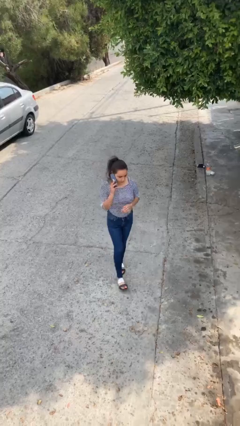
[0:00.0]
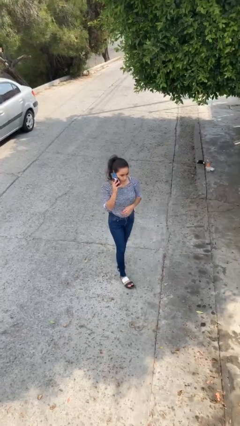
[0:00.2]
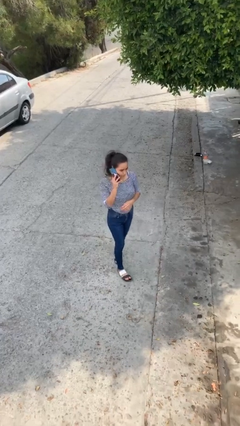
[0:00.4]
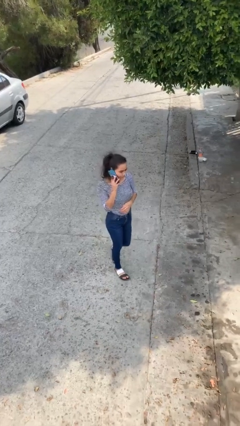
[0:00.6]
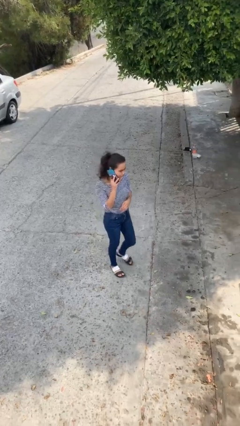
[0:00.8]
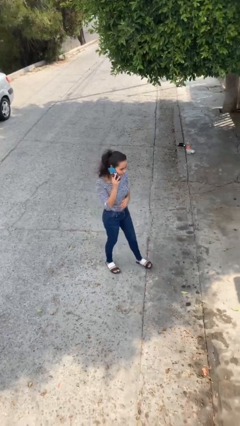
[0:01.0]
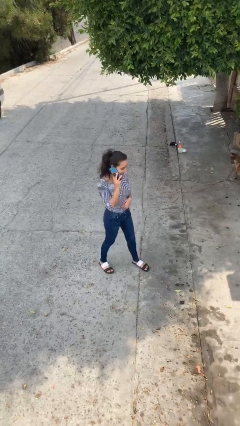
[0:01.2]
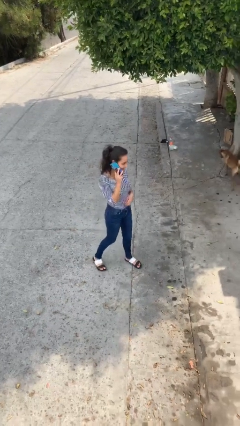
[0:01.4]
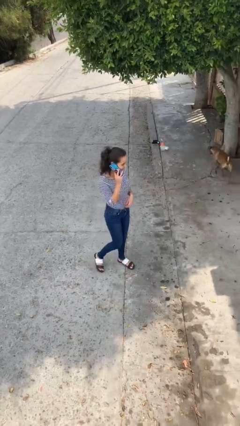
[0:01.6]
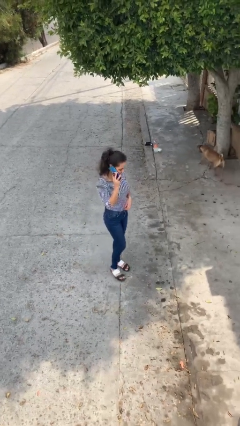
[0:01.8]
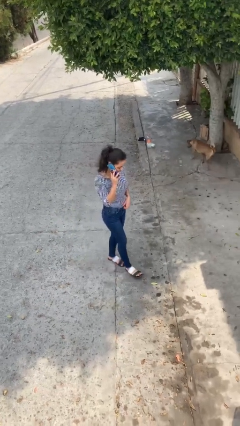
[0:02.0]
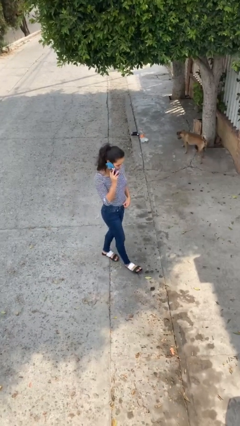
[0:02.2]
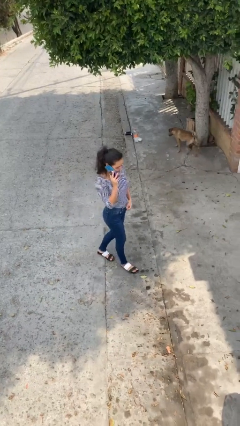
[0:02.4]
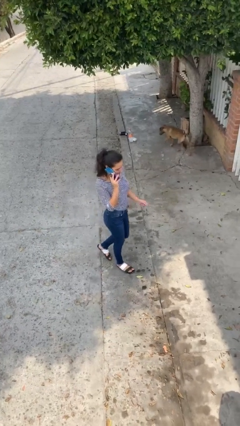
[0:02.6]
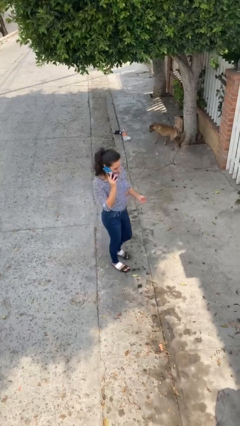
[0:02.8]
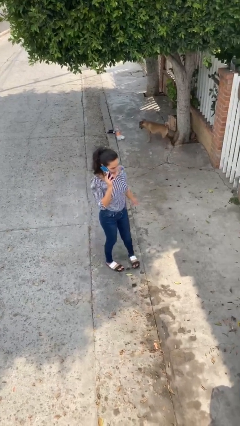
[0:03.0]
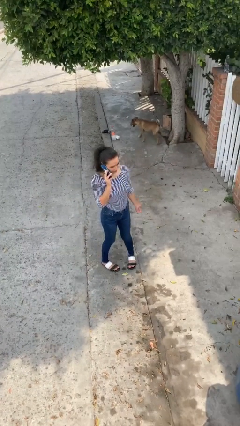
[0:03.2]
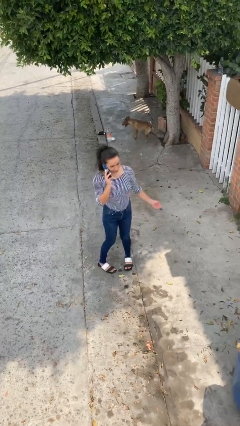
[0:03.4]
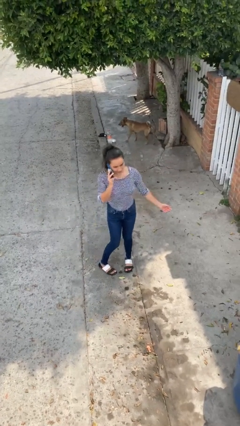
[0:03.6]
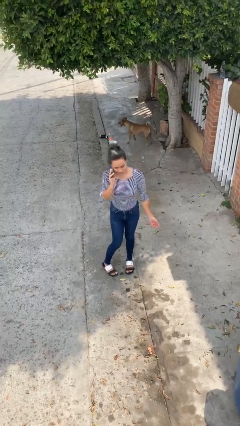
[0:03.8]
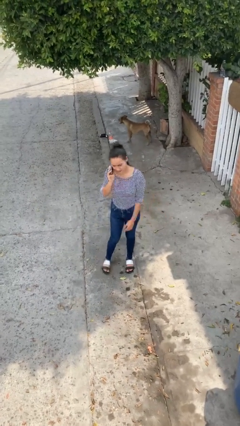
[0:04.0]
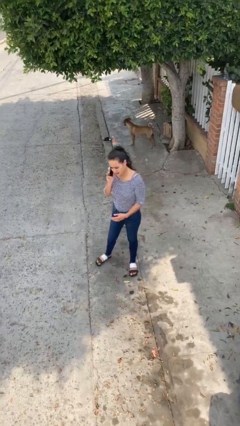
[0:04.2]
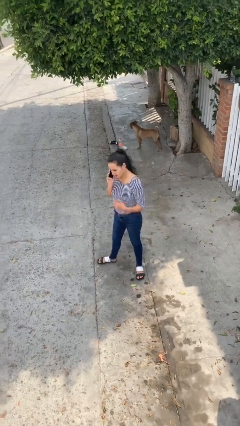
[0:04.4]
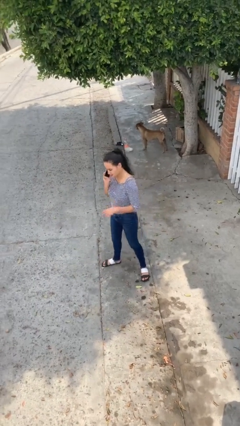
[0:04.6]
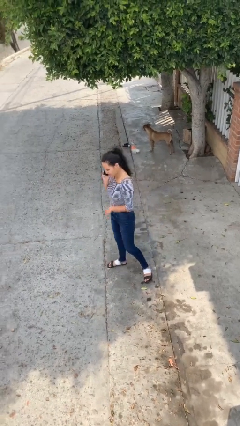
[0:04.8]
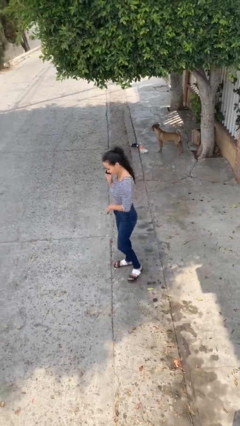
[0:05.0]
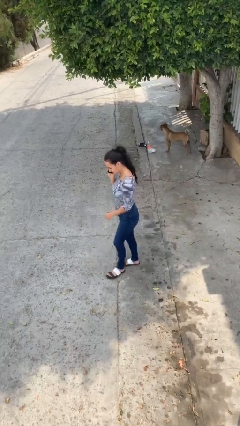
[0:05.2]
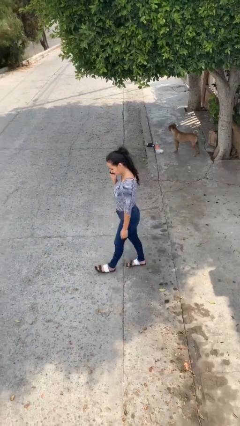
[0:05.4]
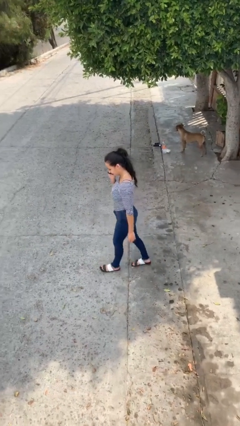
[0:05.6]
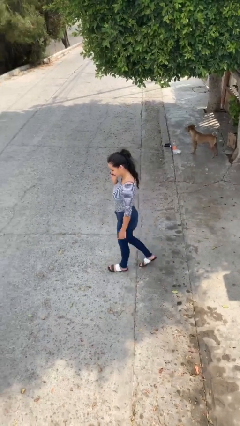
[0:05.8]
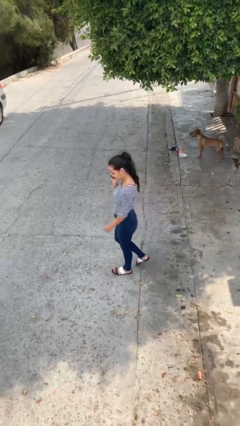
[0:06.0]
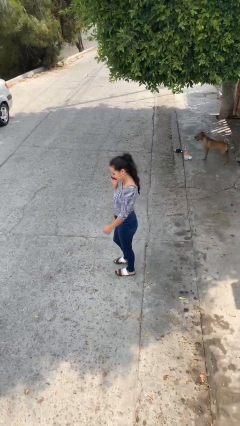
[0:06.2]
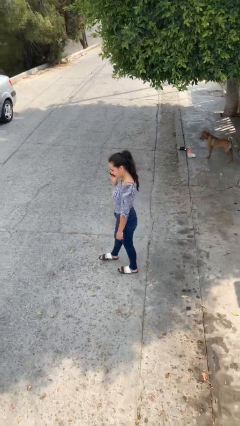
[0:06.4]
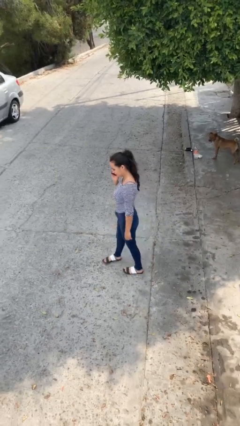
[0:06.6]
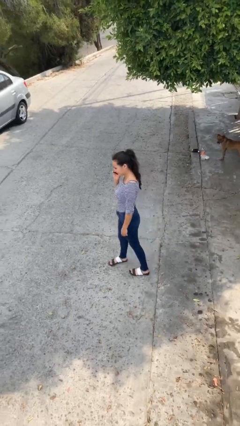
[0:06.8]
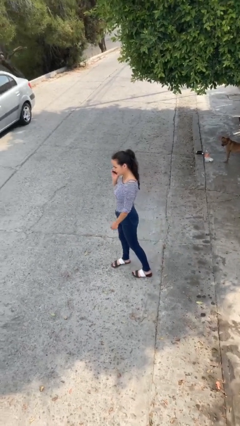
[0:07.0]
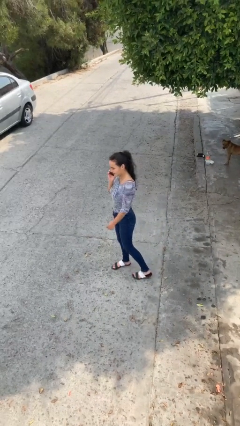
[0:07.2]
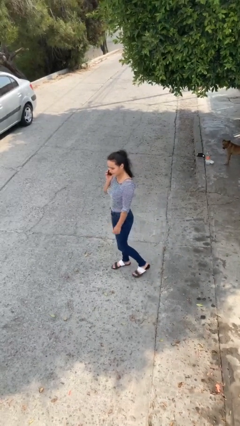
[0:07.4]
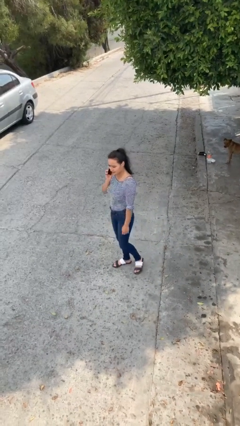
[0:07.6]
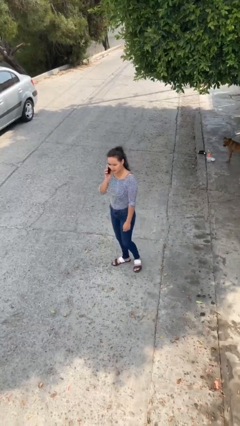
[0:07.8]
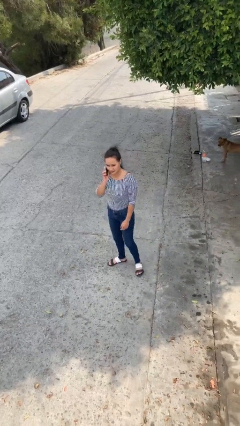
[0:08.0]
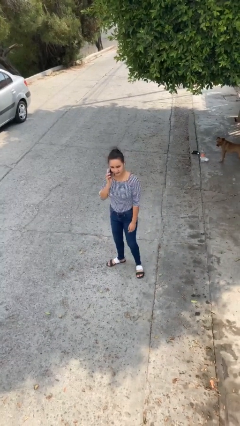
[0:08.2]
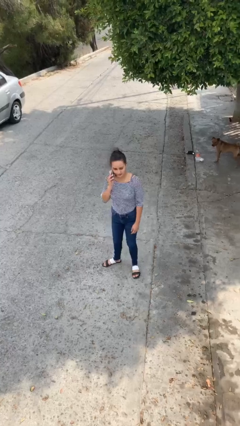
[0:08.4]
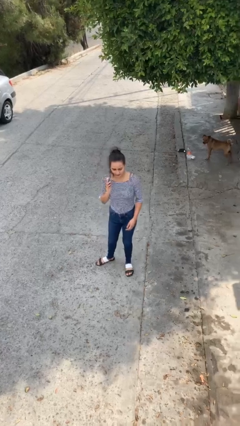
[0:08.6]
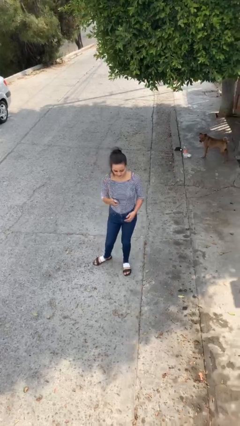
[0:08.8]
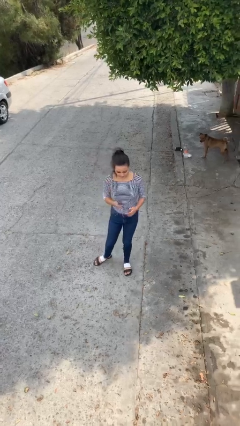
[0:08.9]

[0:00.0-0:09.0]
person talks on phone

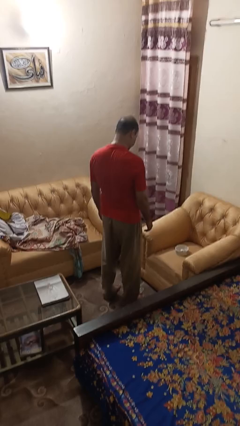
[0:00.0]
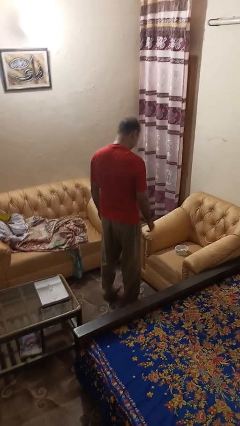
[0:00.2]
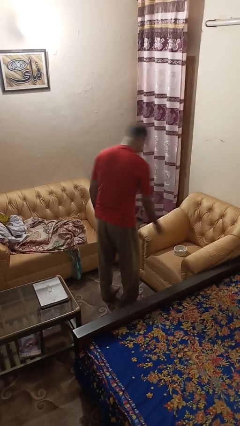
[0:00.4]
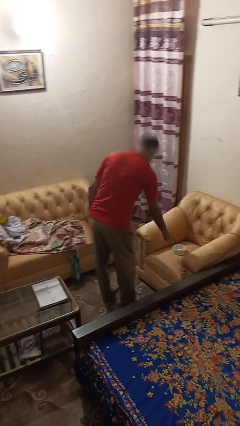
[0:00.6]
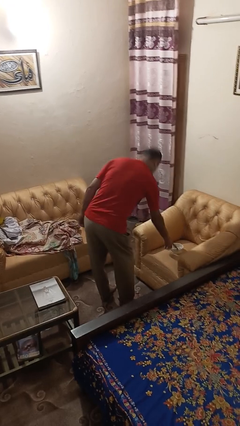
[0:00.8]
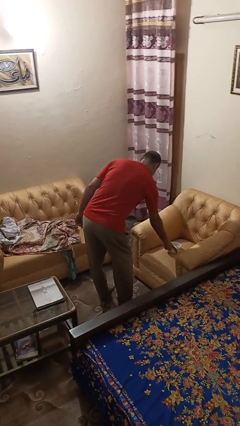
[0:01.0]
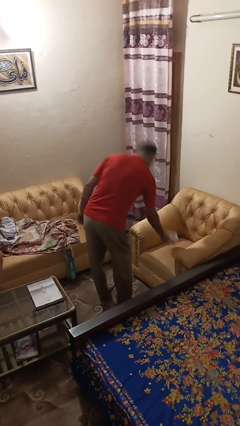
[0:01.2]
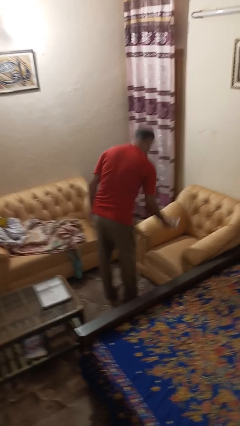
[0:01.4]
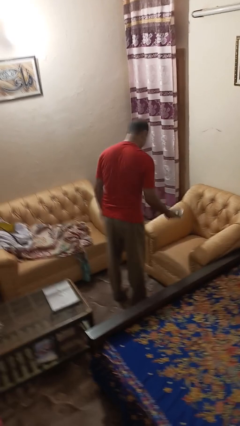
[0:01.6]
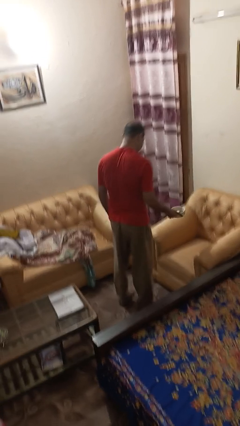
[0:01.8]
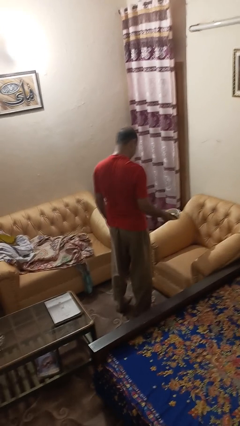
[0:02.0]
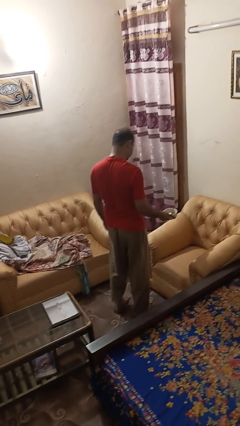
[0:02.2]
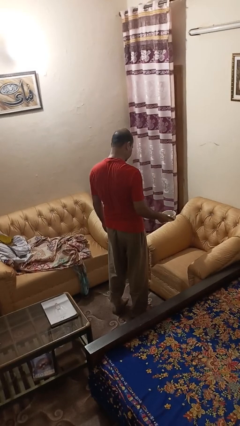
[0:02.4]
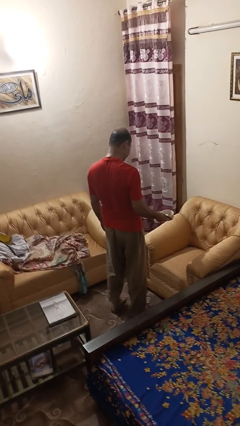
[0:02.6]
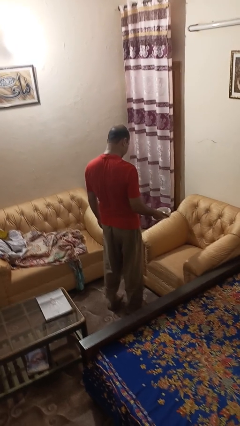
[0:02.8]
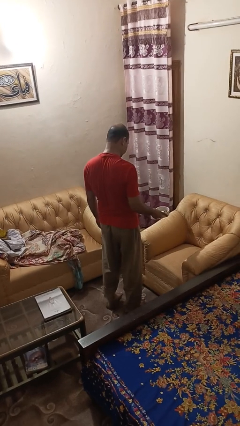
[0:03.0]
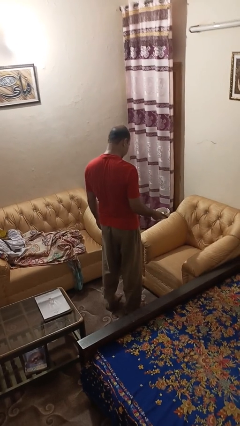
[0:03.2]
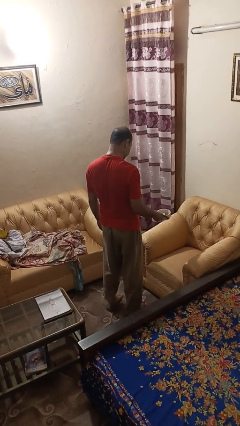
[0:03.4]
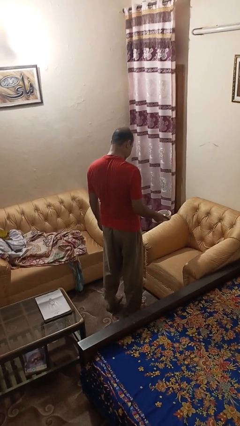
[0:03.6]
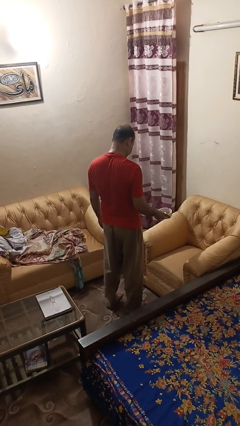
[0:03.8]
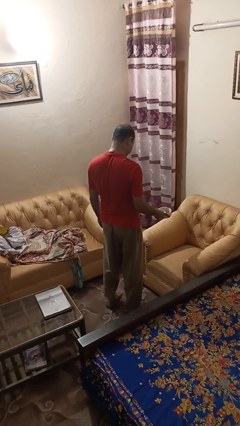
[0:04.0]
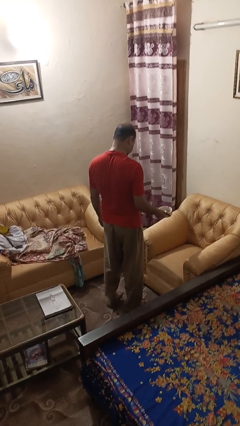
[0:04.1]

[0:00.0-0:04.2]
person picks up object from couch

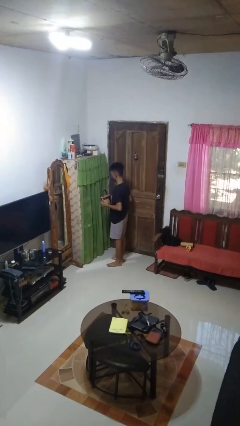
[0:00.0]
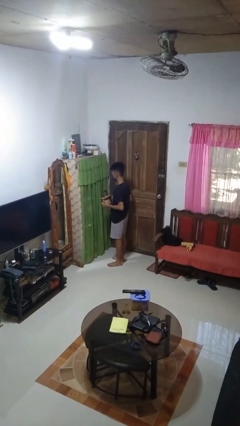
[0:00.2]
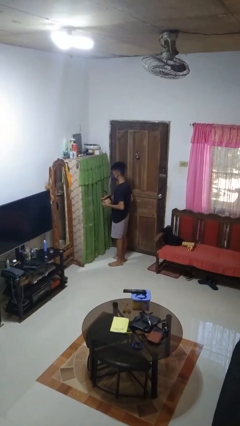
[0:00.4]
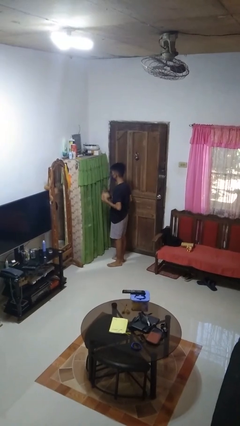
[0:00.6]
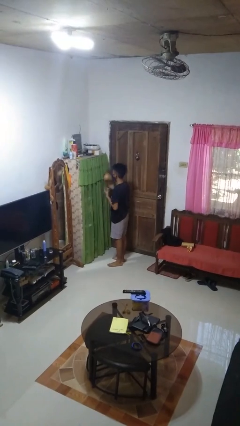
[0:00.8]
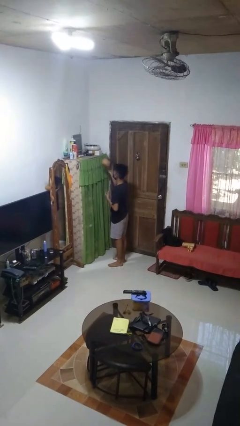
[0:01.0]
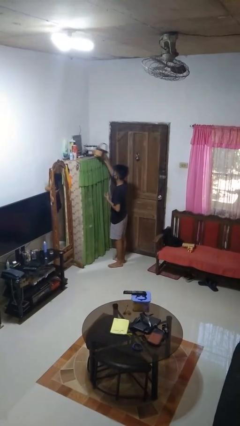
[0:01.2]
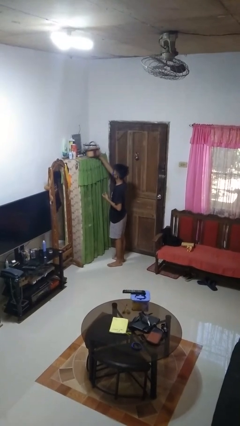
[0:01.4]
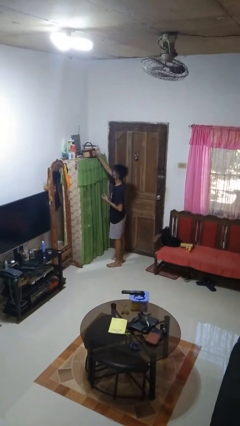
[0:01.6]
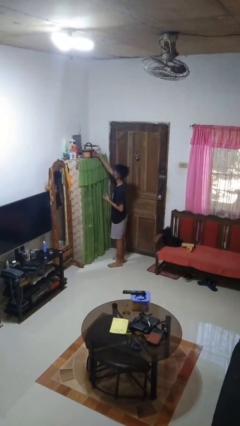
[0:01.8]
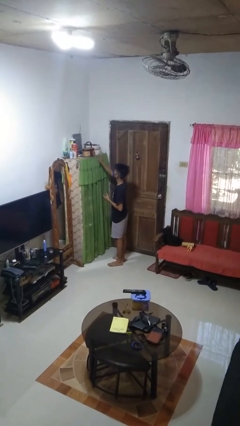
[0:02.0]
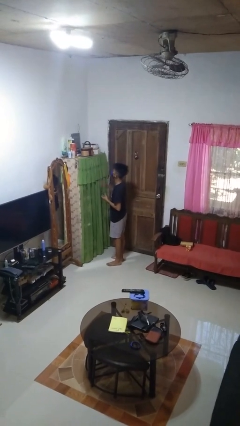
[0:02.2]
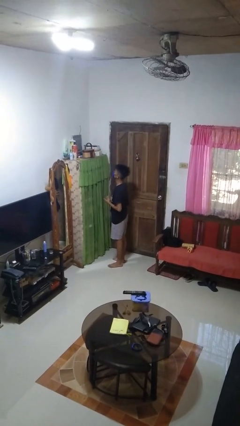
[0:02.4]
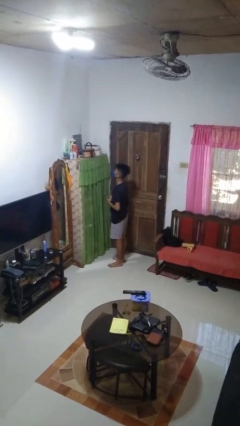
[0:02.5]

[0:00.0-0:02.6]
person puts down object on shelf

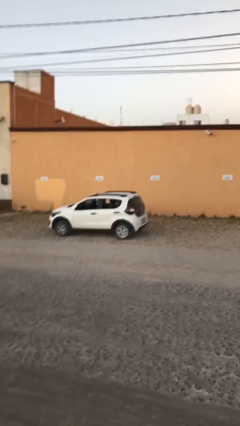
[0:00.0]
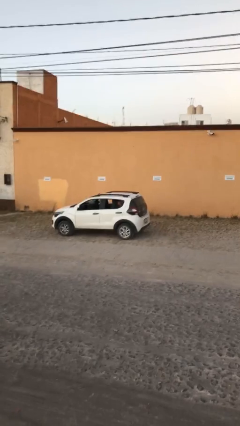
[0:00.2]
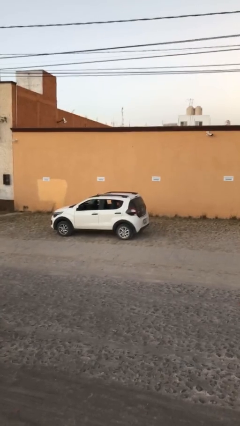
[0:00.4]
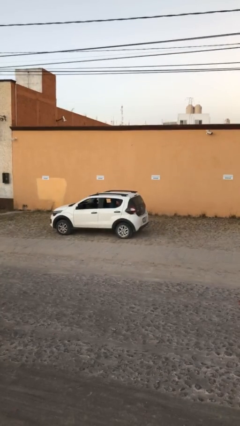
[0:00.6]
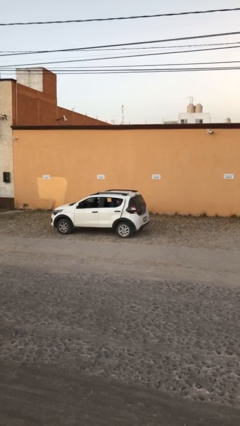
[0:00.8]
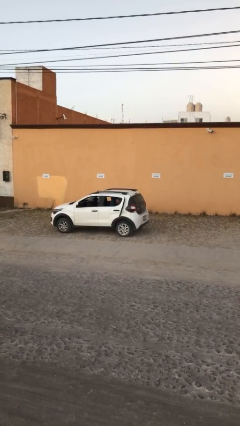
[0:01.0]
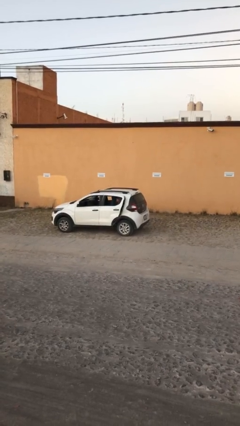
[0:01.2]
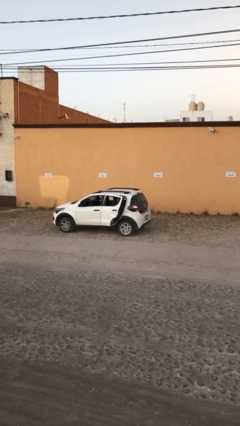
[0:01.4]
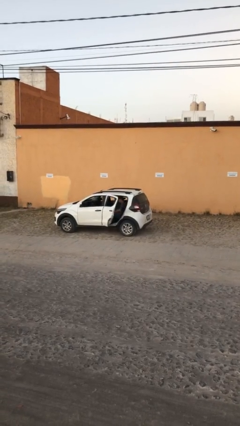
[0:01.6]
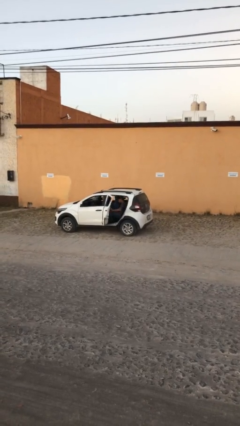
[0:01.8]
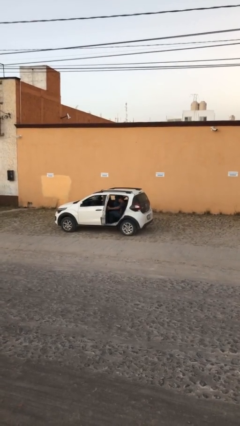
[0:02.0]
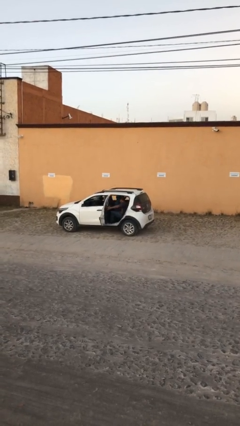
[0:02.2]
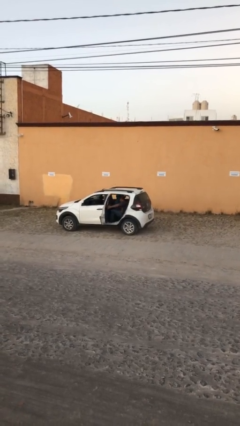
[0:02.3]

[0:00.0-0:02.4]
person opens car door
